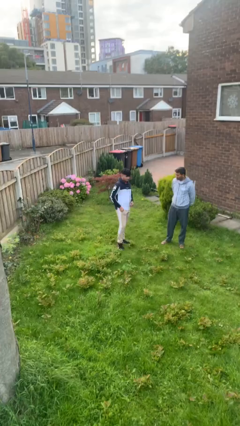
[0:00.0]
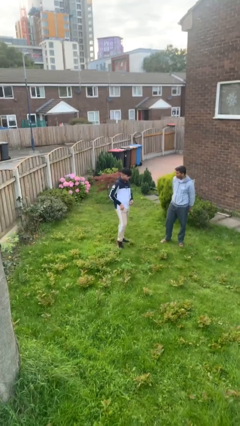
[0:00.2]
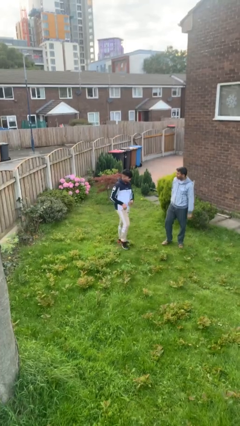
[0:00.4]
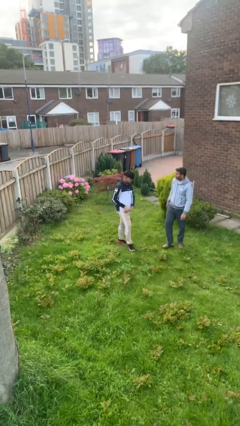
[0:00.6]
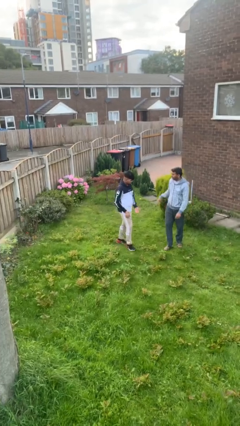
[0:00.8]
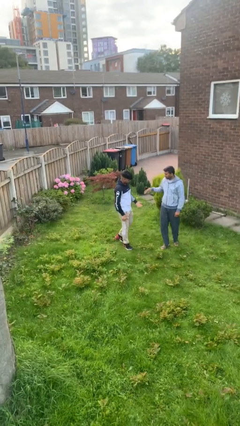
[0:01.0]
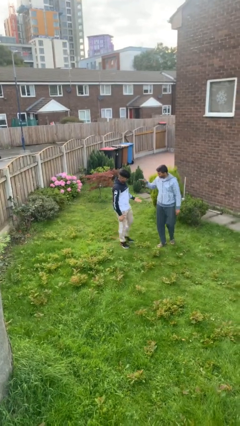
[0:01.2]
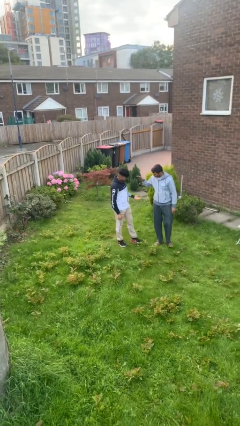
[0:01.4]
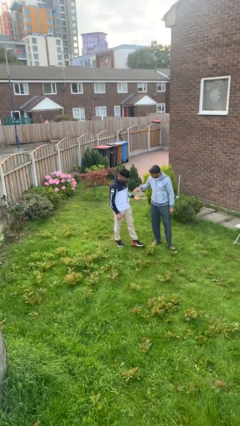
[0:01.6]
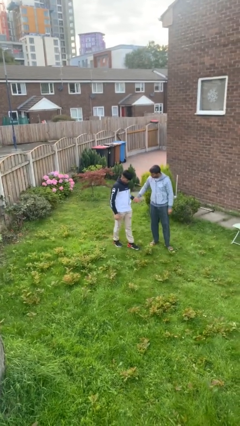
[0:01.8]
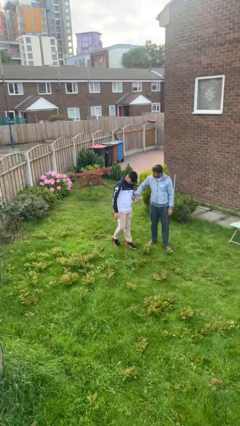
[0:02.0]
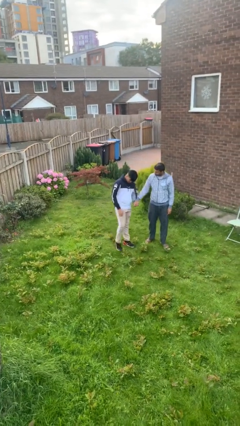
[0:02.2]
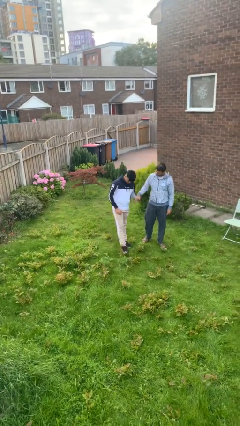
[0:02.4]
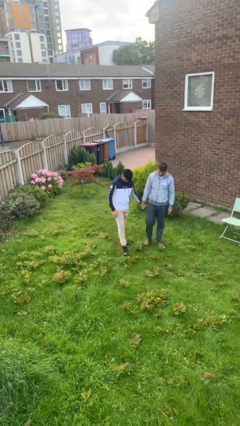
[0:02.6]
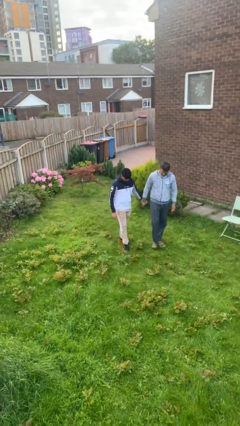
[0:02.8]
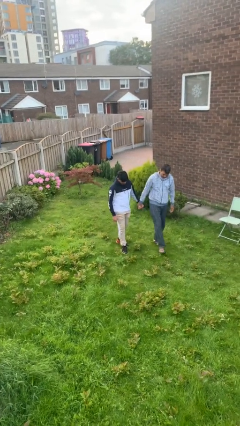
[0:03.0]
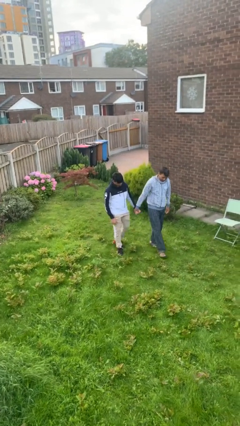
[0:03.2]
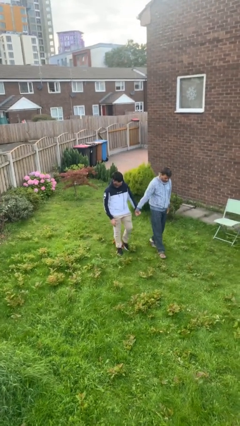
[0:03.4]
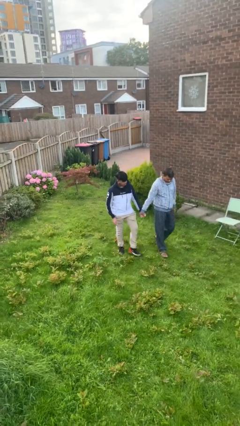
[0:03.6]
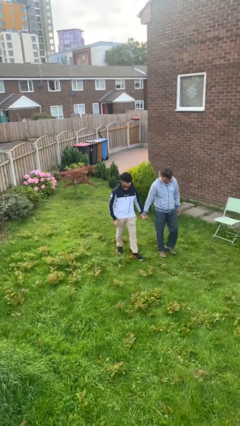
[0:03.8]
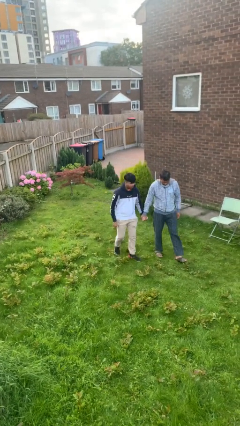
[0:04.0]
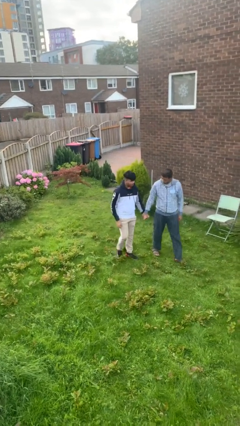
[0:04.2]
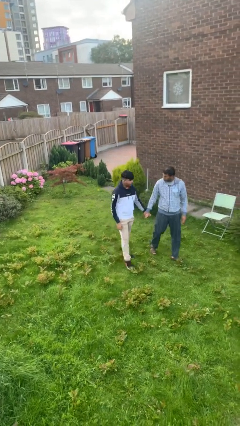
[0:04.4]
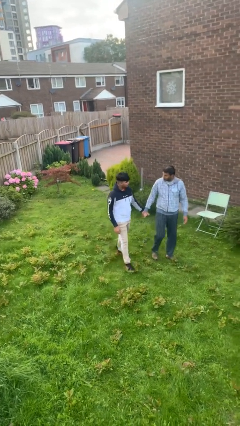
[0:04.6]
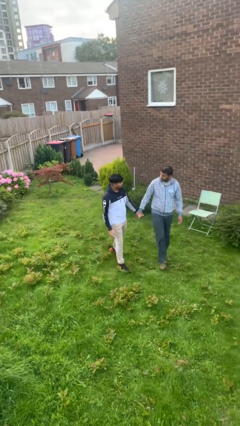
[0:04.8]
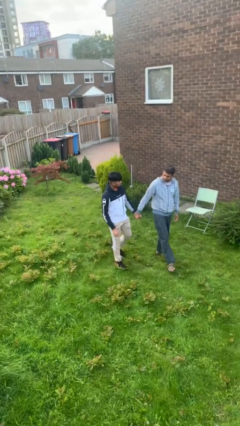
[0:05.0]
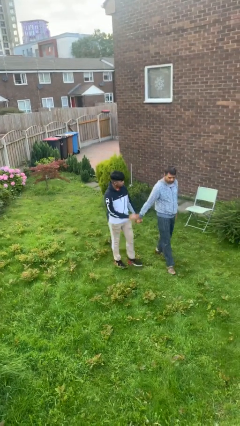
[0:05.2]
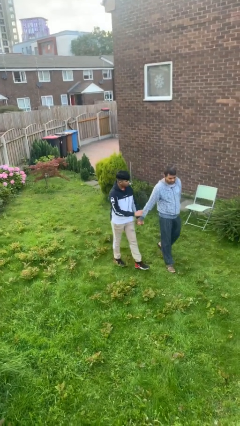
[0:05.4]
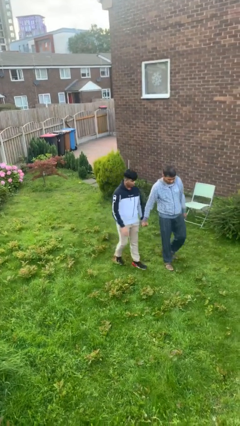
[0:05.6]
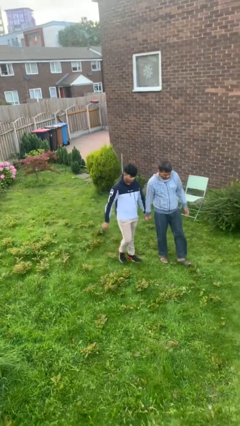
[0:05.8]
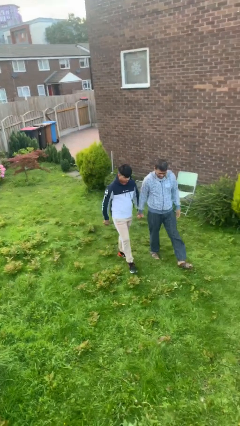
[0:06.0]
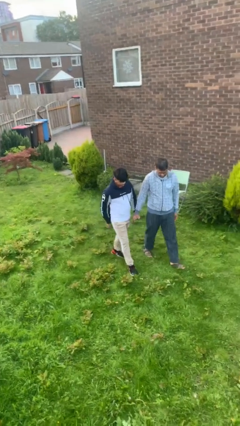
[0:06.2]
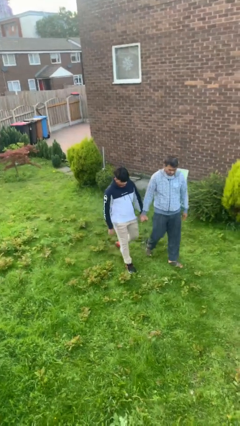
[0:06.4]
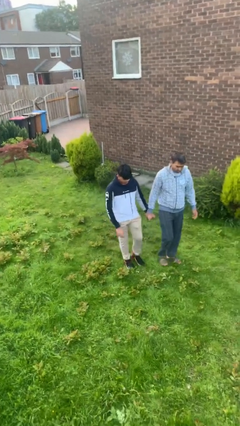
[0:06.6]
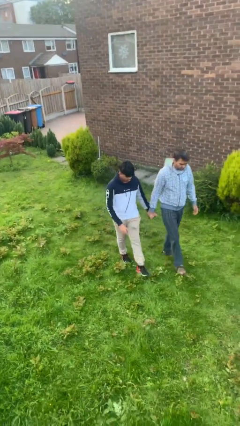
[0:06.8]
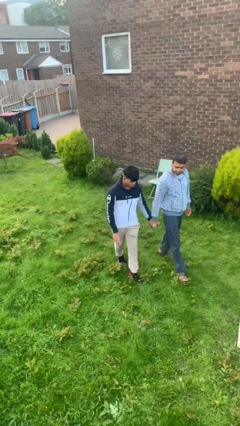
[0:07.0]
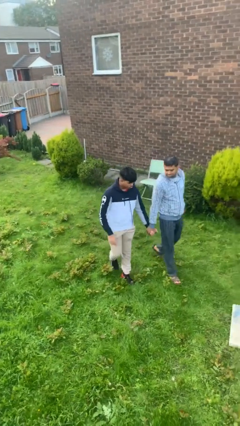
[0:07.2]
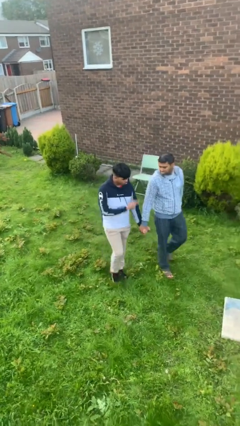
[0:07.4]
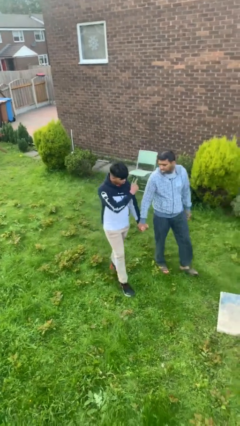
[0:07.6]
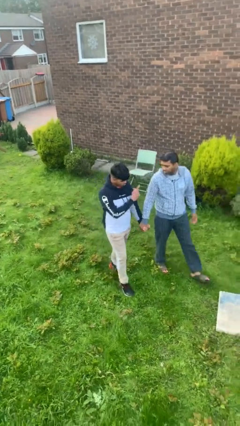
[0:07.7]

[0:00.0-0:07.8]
person holds hand

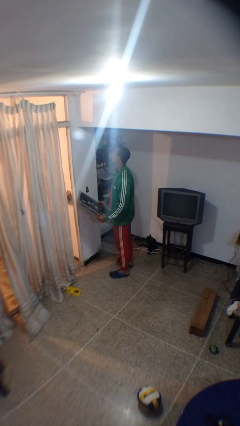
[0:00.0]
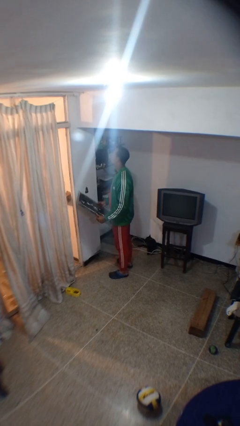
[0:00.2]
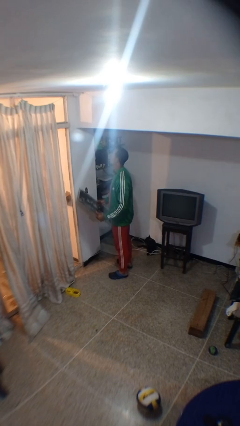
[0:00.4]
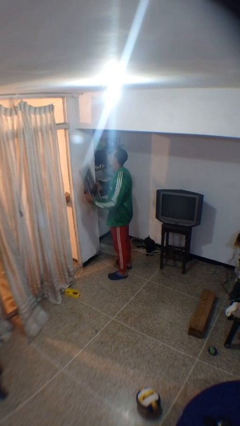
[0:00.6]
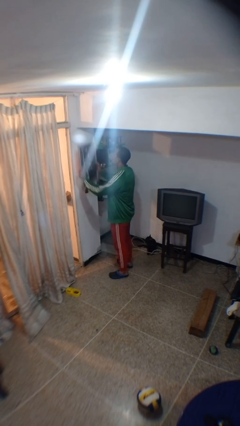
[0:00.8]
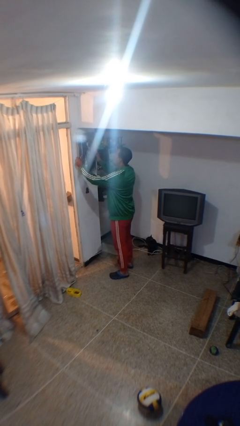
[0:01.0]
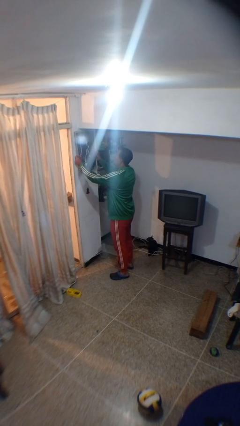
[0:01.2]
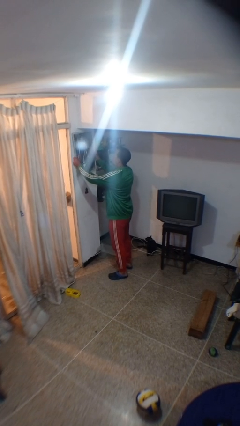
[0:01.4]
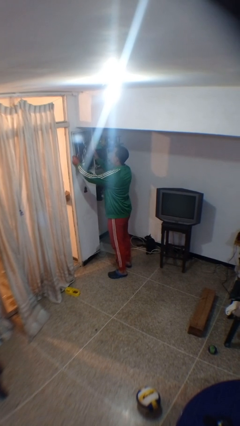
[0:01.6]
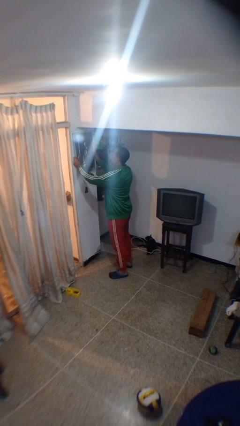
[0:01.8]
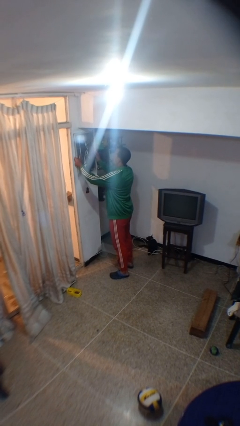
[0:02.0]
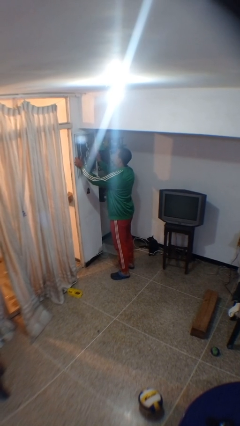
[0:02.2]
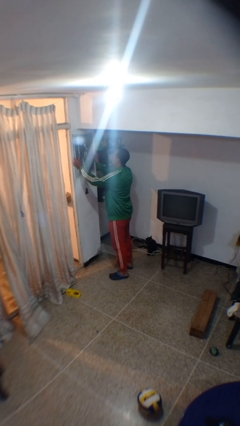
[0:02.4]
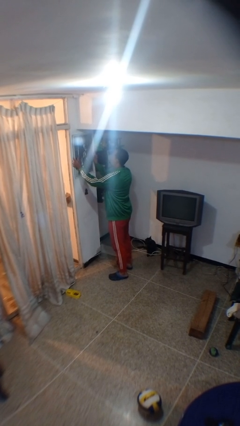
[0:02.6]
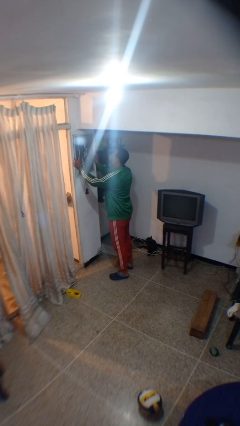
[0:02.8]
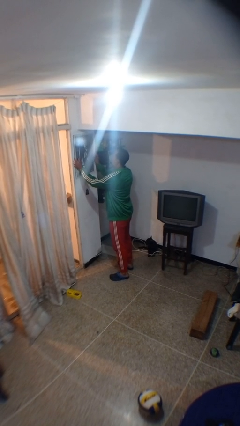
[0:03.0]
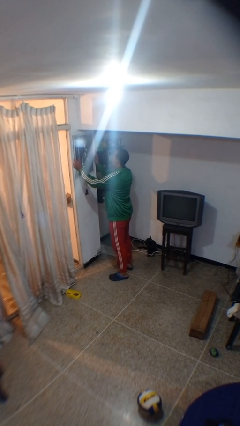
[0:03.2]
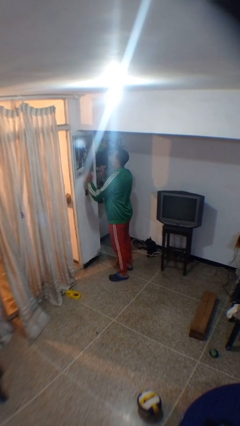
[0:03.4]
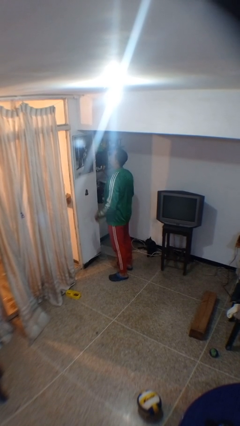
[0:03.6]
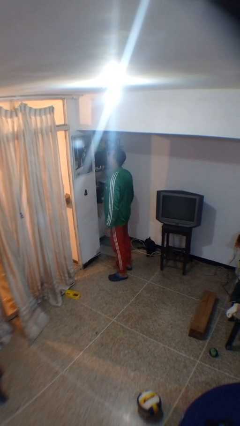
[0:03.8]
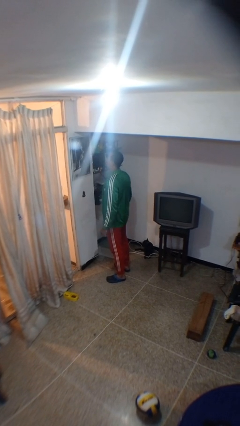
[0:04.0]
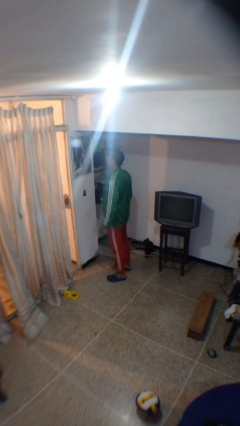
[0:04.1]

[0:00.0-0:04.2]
person puts up picture frame

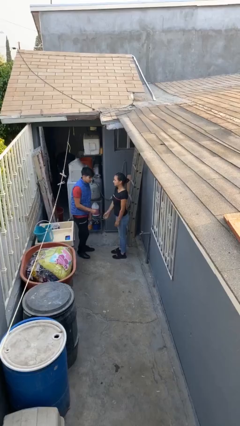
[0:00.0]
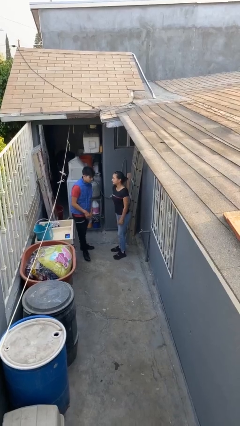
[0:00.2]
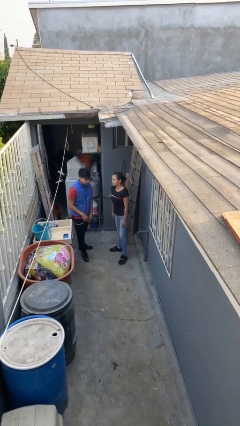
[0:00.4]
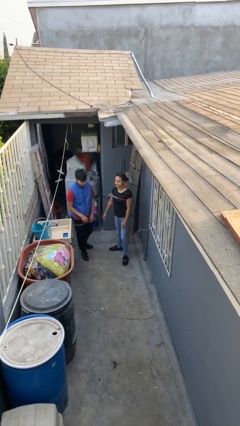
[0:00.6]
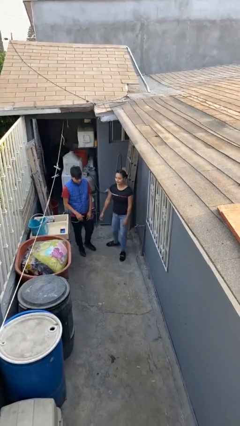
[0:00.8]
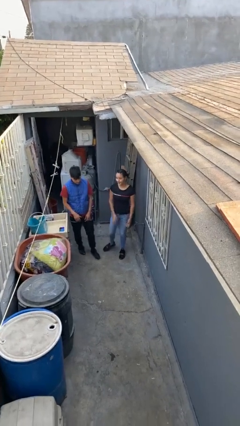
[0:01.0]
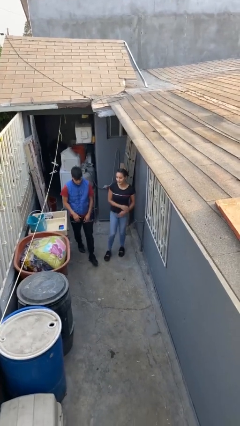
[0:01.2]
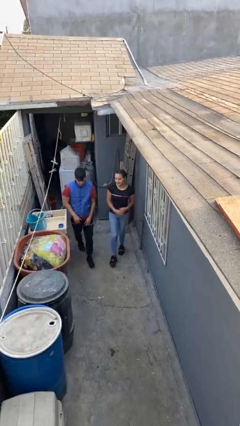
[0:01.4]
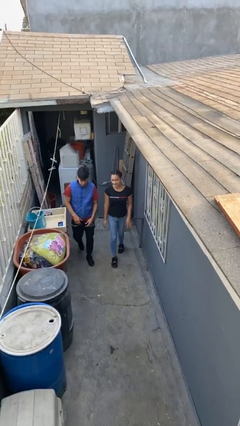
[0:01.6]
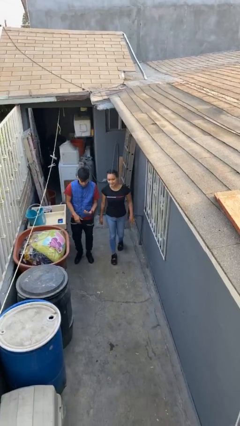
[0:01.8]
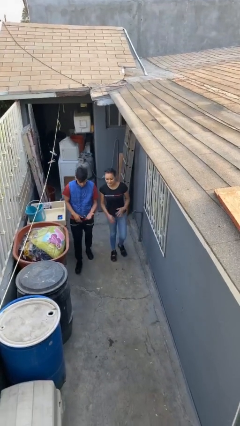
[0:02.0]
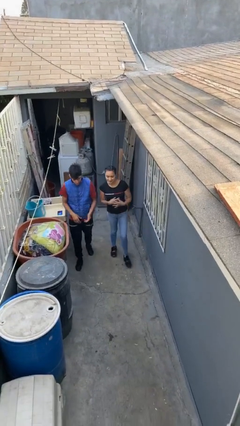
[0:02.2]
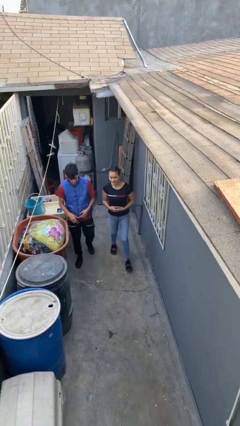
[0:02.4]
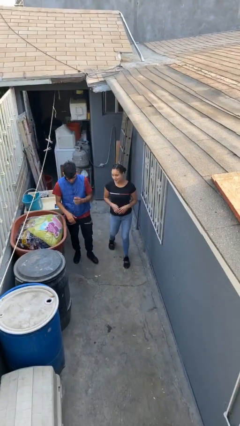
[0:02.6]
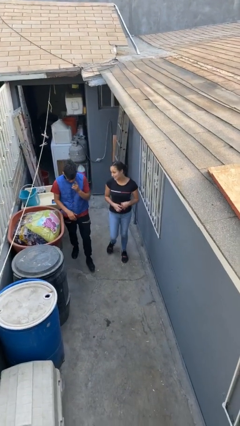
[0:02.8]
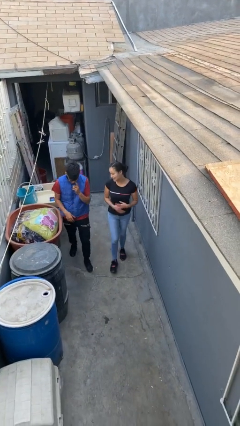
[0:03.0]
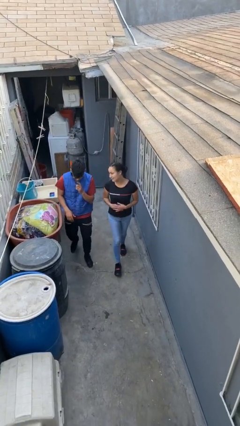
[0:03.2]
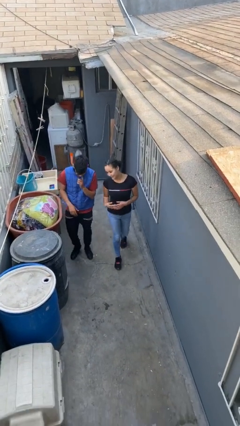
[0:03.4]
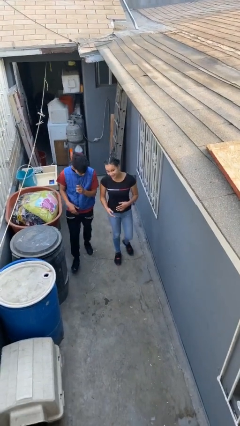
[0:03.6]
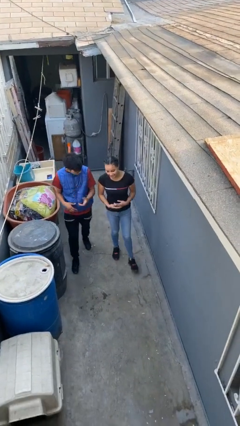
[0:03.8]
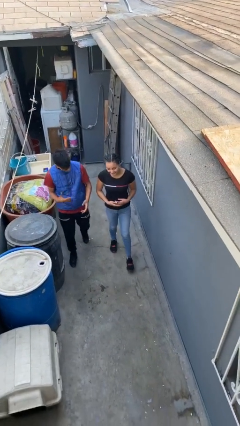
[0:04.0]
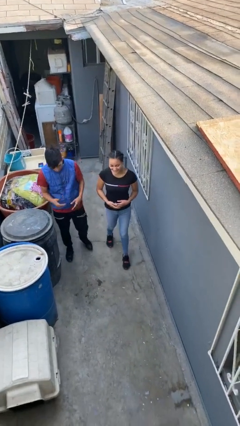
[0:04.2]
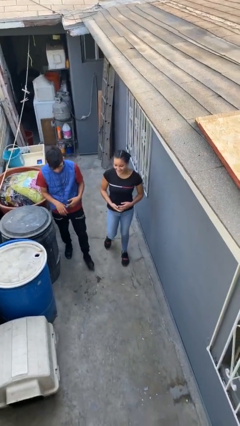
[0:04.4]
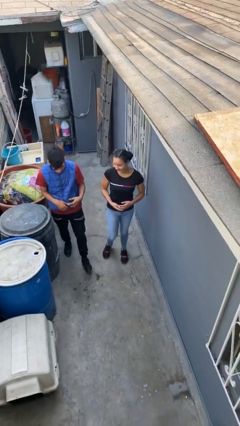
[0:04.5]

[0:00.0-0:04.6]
person talks to person

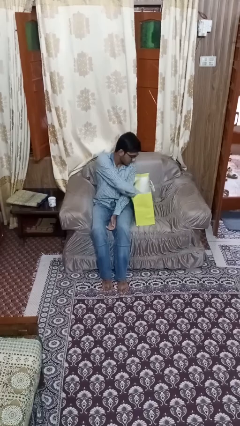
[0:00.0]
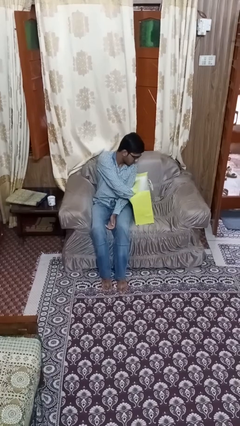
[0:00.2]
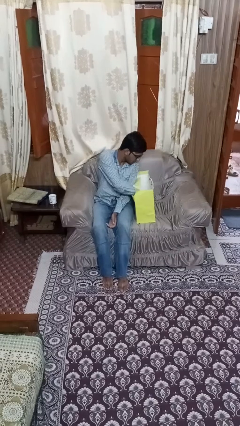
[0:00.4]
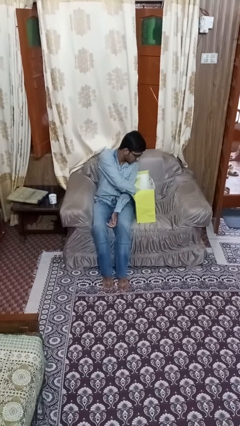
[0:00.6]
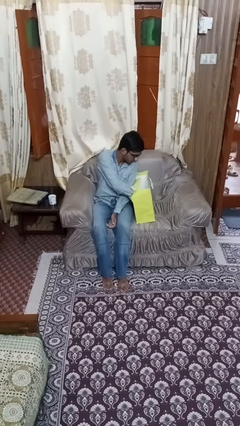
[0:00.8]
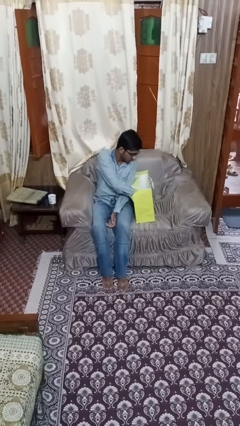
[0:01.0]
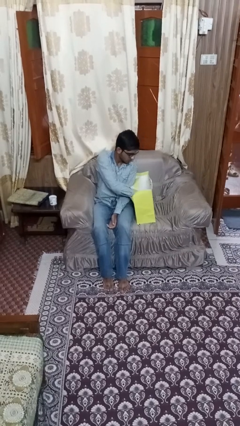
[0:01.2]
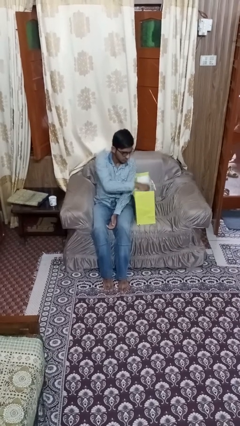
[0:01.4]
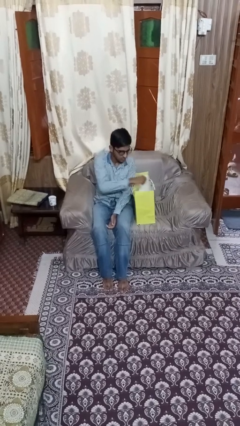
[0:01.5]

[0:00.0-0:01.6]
person searches in bag
